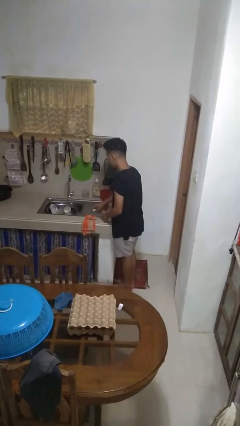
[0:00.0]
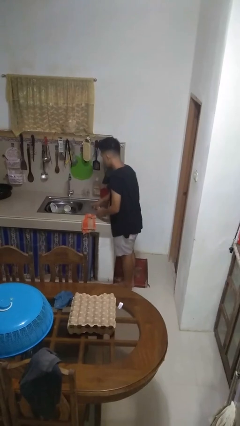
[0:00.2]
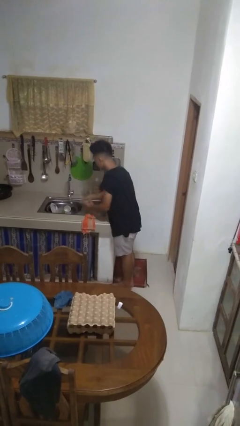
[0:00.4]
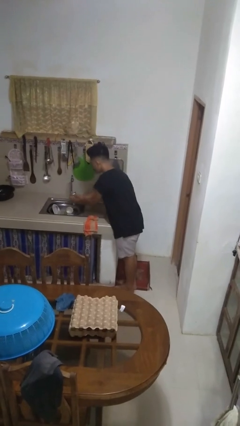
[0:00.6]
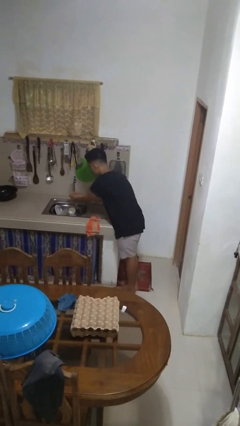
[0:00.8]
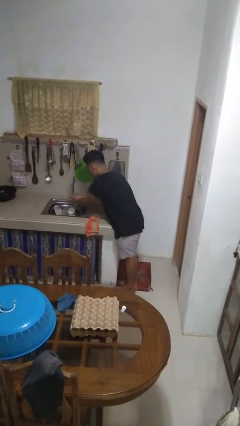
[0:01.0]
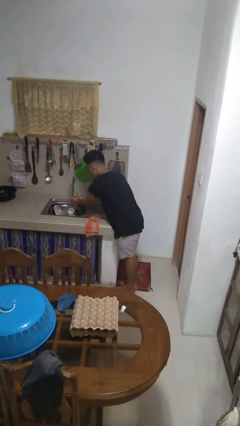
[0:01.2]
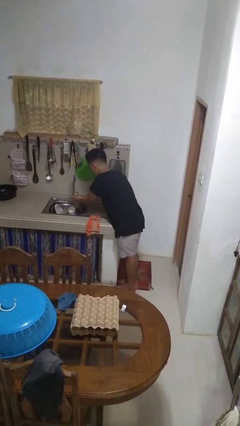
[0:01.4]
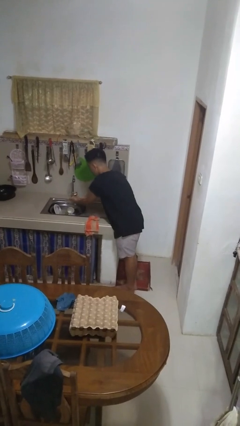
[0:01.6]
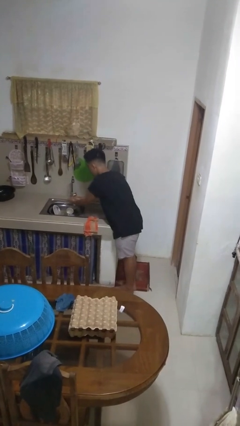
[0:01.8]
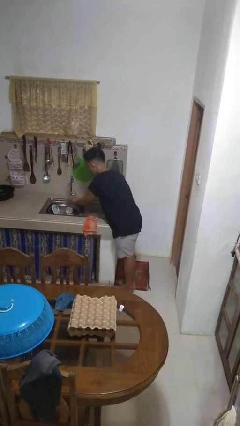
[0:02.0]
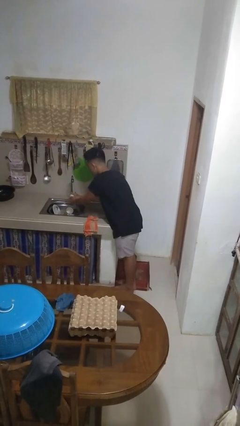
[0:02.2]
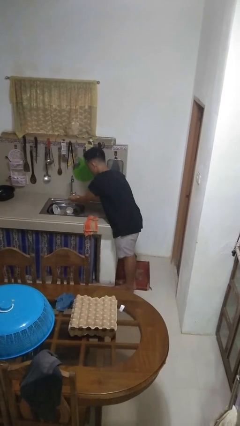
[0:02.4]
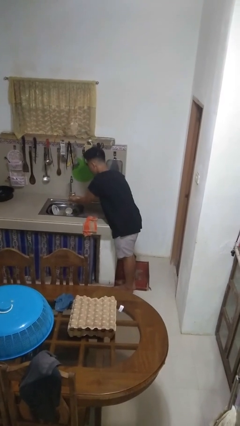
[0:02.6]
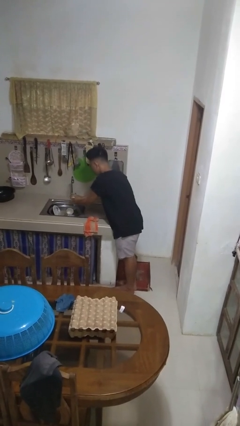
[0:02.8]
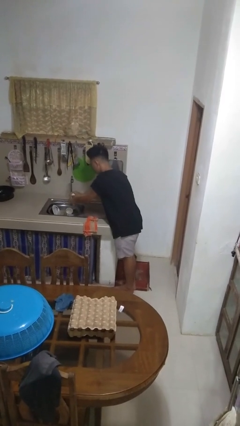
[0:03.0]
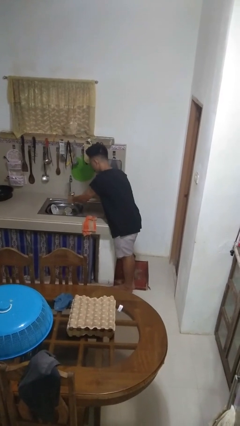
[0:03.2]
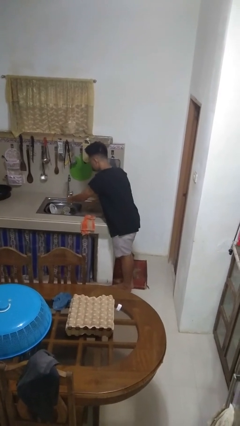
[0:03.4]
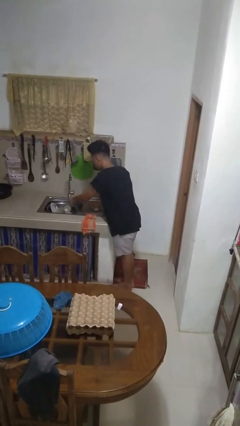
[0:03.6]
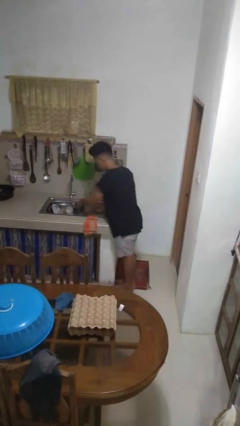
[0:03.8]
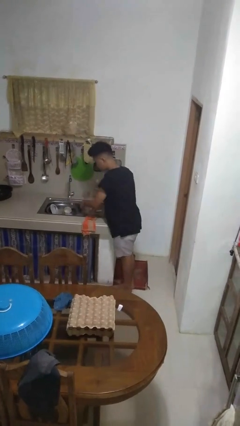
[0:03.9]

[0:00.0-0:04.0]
person washes hands

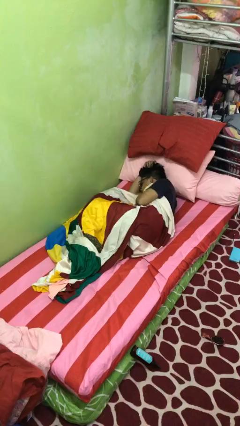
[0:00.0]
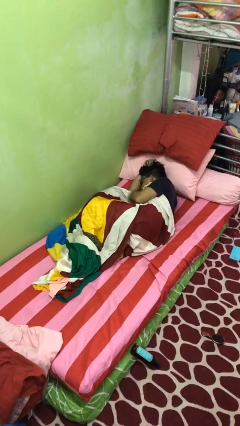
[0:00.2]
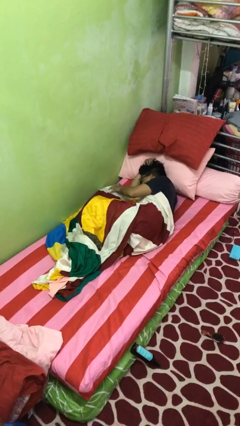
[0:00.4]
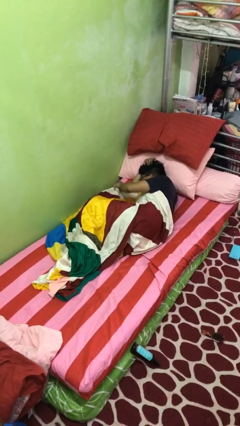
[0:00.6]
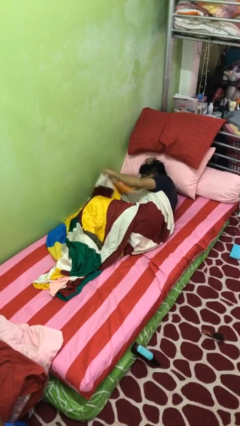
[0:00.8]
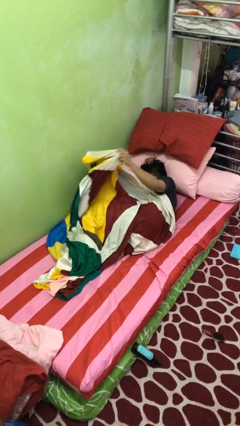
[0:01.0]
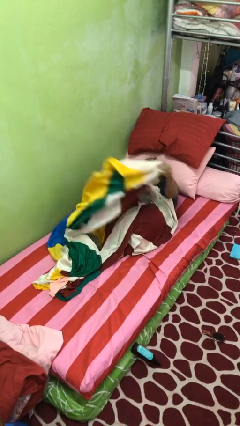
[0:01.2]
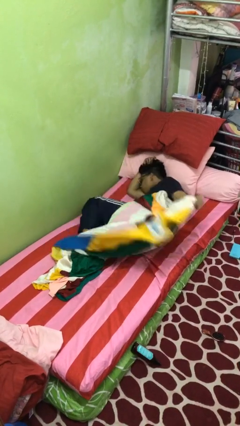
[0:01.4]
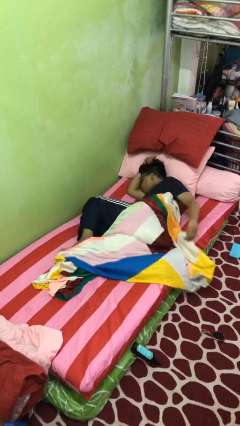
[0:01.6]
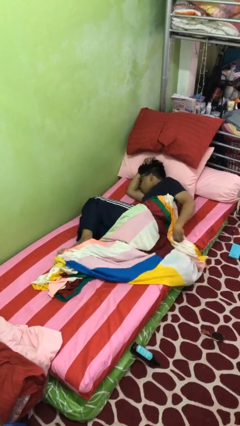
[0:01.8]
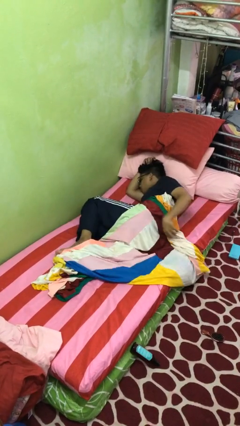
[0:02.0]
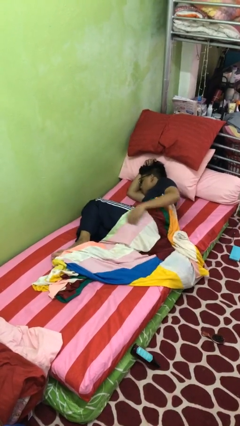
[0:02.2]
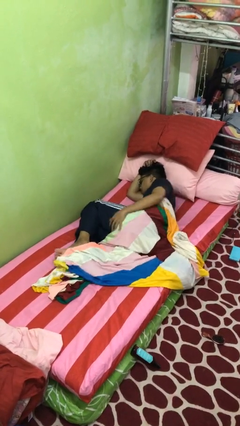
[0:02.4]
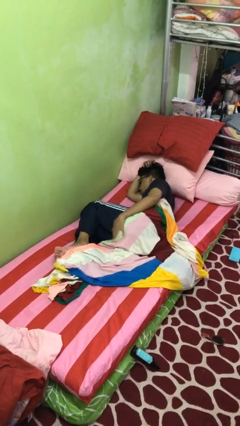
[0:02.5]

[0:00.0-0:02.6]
person uncovers with blanket

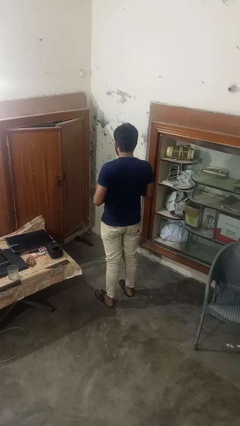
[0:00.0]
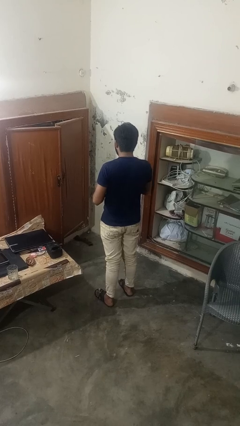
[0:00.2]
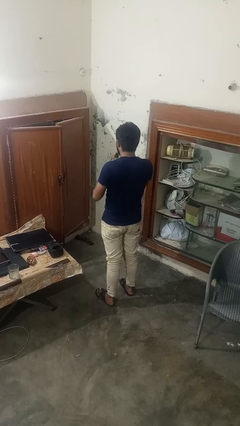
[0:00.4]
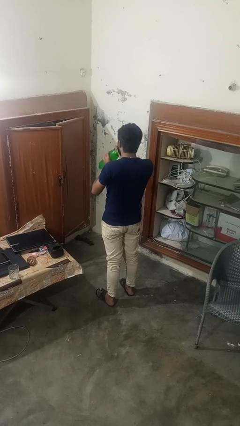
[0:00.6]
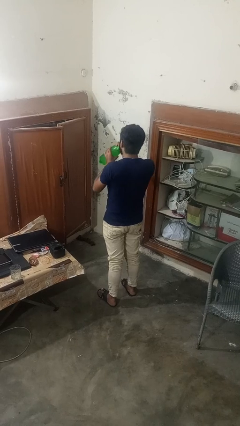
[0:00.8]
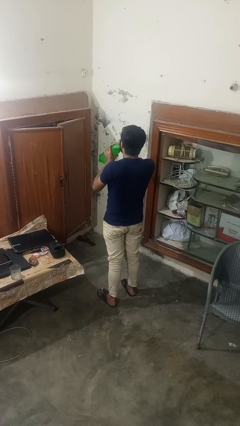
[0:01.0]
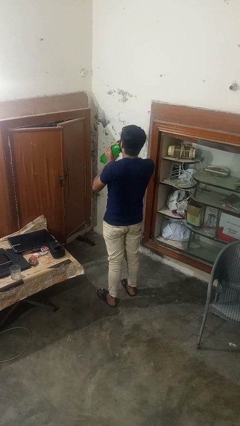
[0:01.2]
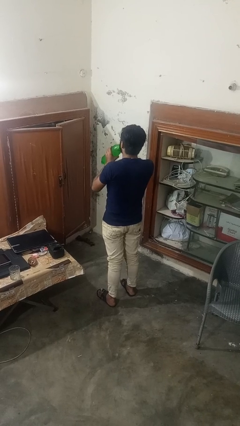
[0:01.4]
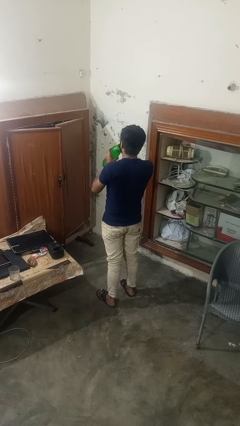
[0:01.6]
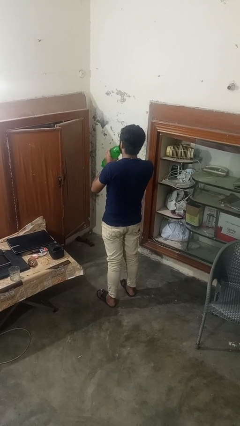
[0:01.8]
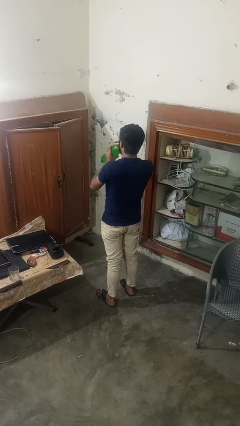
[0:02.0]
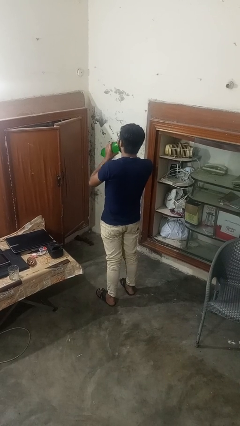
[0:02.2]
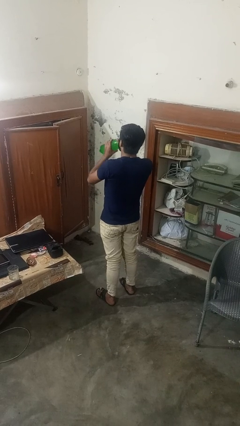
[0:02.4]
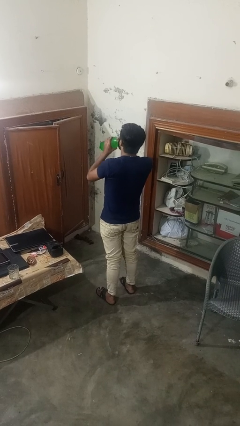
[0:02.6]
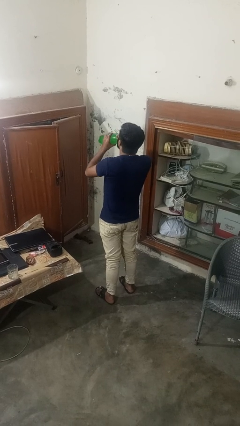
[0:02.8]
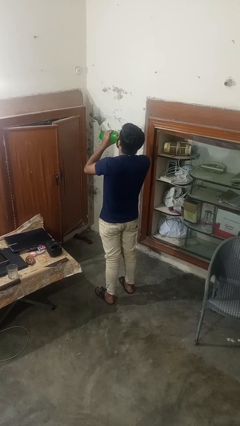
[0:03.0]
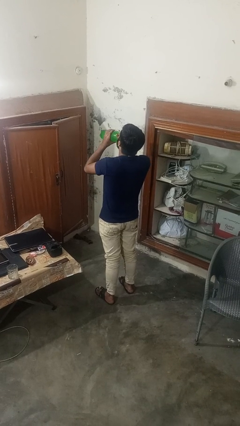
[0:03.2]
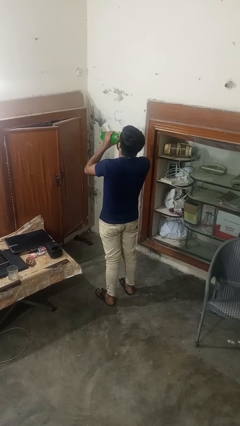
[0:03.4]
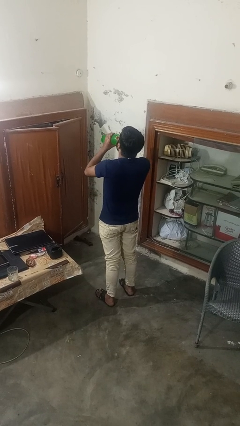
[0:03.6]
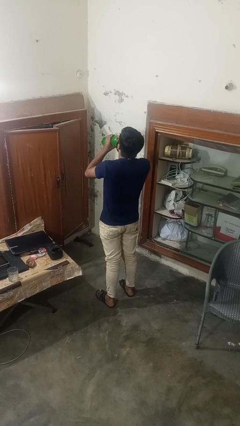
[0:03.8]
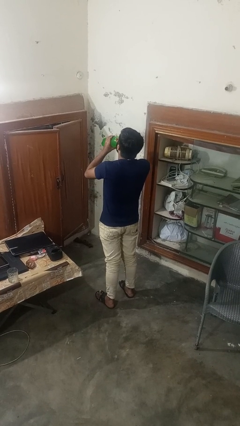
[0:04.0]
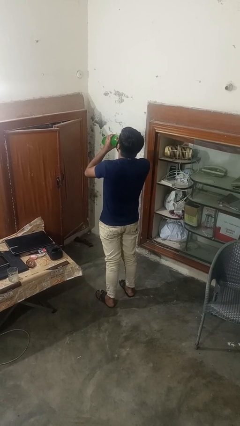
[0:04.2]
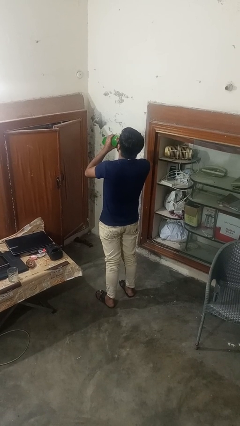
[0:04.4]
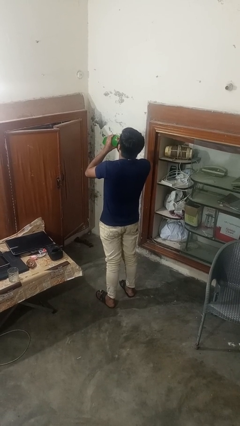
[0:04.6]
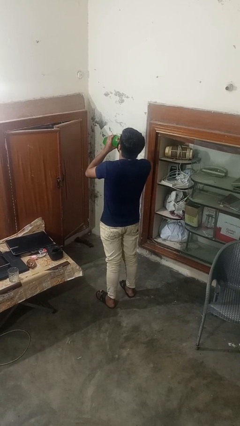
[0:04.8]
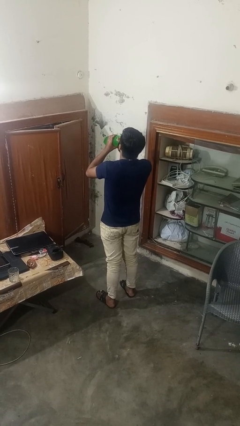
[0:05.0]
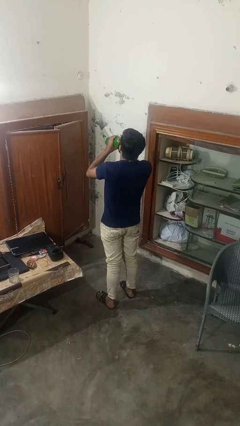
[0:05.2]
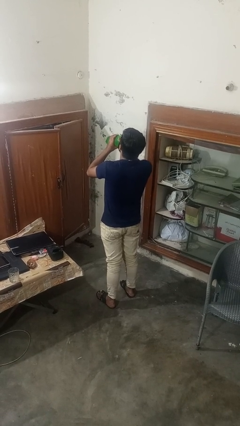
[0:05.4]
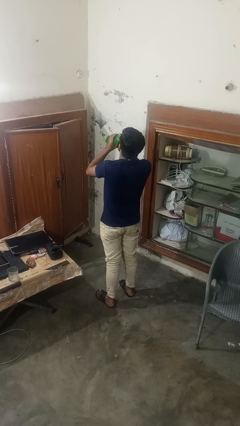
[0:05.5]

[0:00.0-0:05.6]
person drinks from bottle

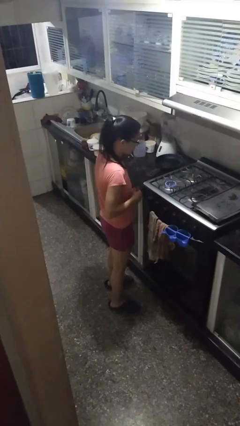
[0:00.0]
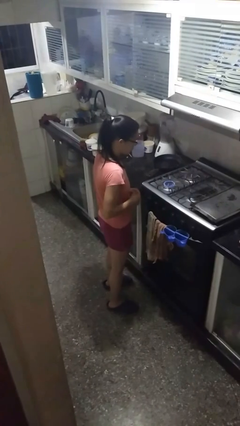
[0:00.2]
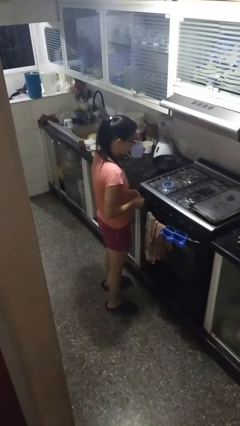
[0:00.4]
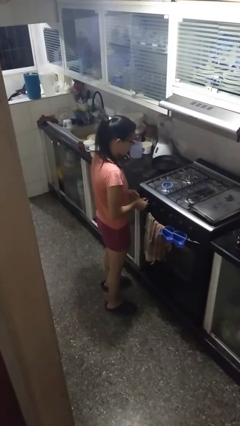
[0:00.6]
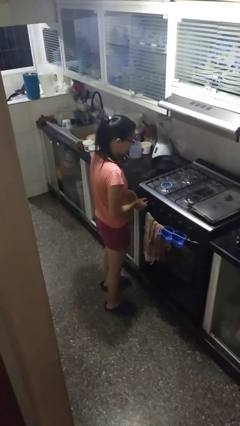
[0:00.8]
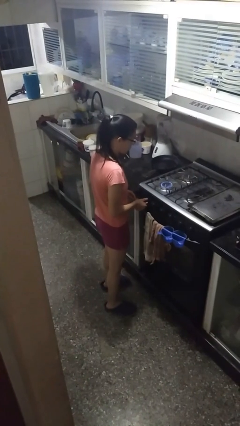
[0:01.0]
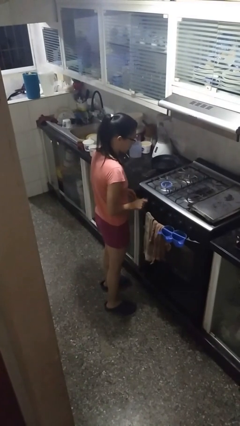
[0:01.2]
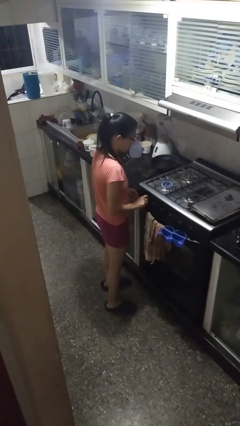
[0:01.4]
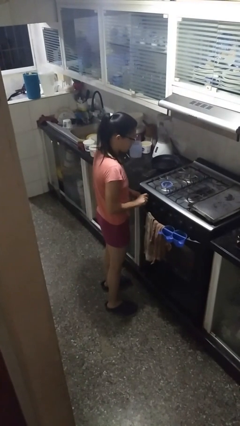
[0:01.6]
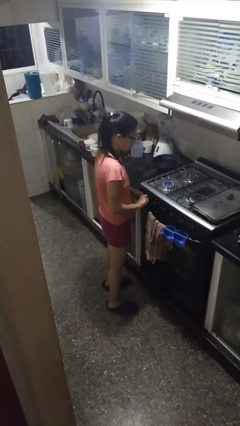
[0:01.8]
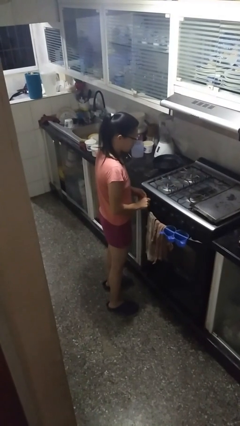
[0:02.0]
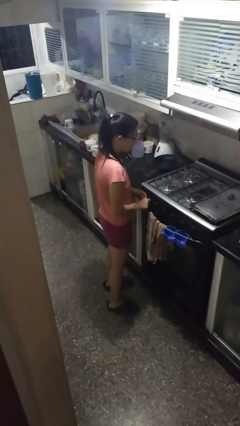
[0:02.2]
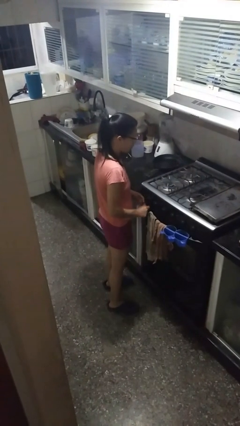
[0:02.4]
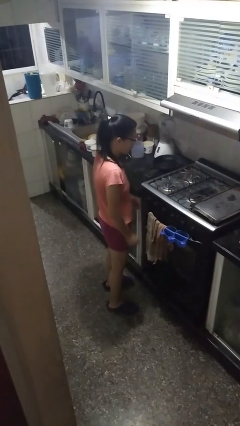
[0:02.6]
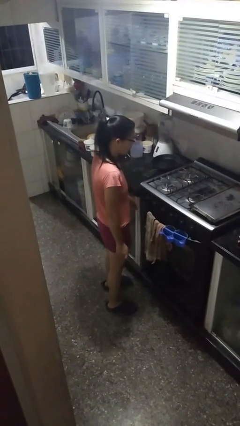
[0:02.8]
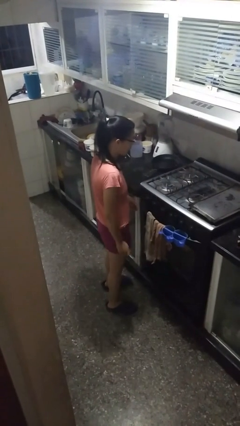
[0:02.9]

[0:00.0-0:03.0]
person turns off stovetop

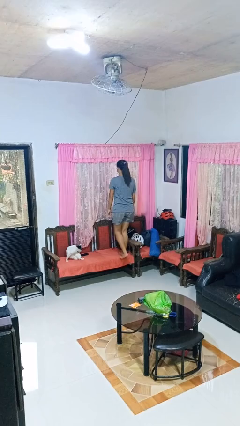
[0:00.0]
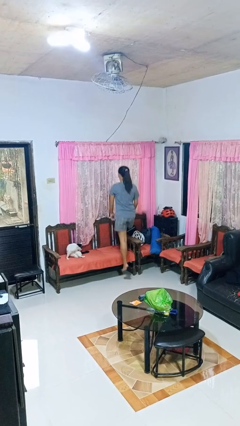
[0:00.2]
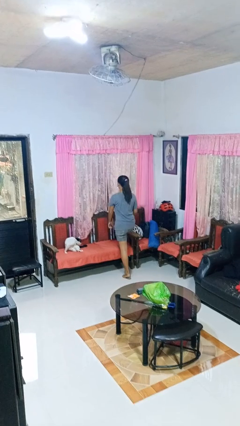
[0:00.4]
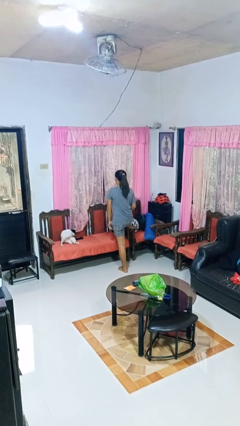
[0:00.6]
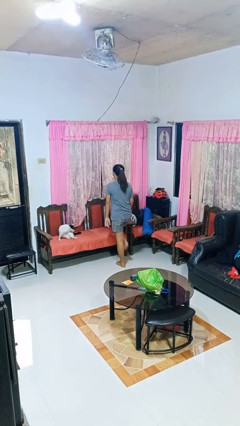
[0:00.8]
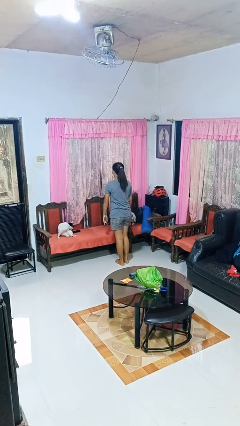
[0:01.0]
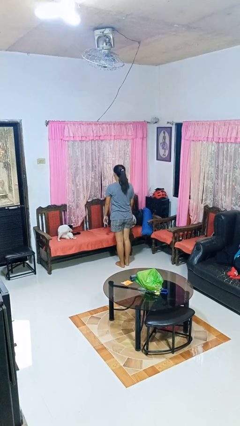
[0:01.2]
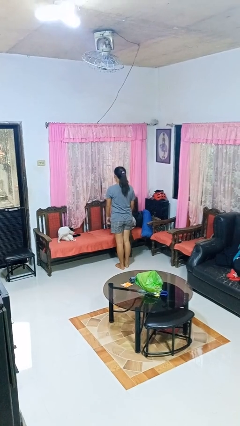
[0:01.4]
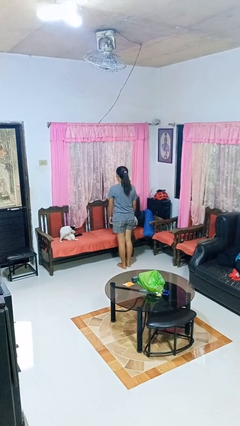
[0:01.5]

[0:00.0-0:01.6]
person climbs off chair

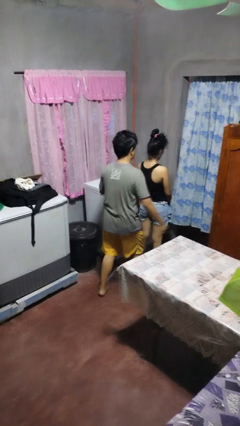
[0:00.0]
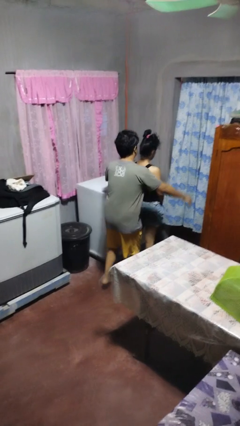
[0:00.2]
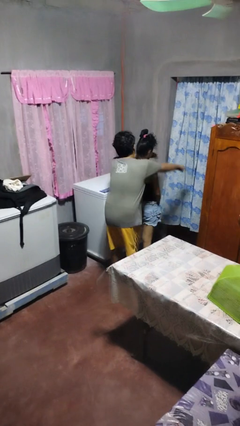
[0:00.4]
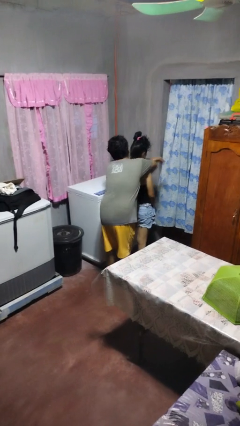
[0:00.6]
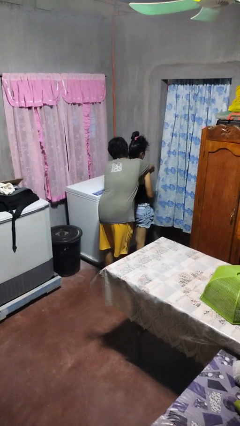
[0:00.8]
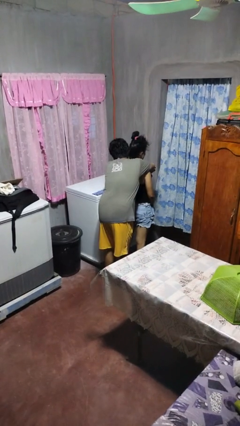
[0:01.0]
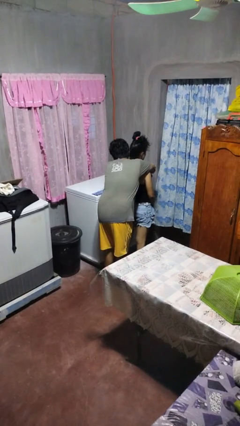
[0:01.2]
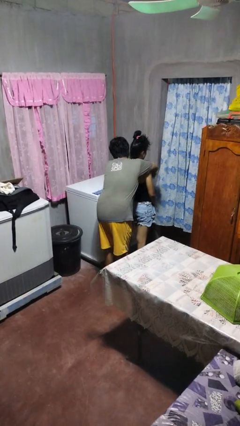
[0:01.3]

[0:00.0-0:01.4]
person hugs person from behind
